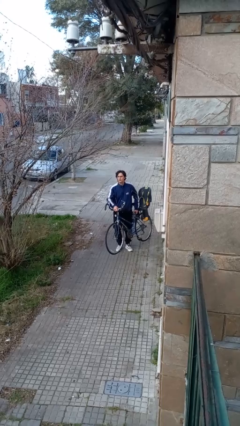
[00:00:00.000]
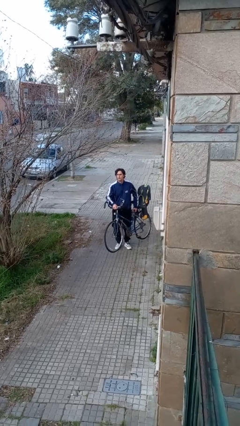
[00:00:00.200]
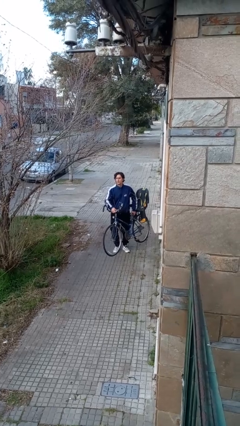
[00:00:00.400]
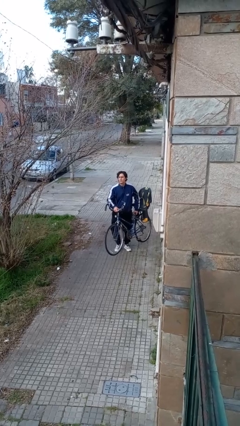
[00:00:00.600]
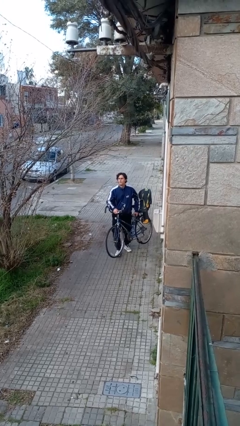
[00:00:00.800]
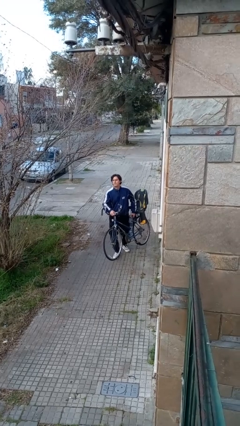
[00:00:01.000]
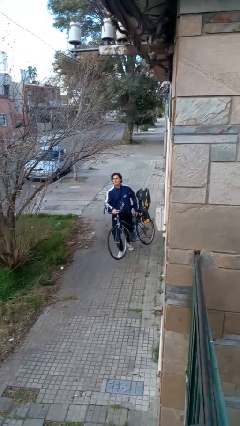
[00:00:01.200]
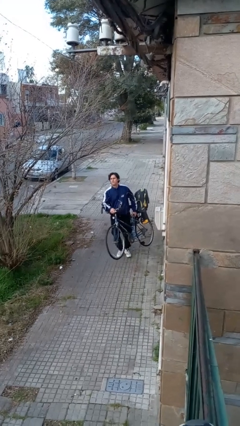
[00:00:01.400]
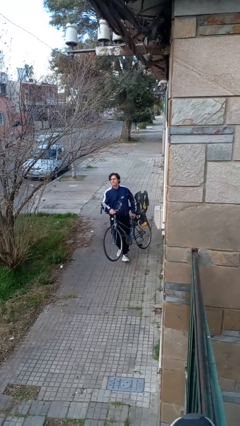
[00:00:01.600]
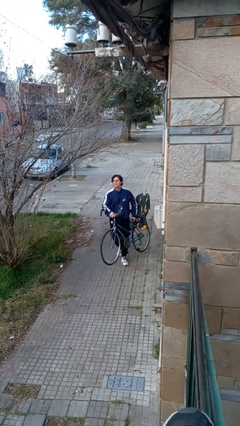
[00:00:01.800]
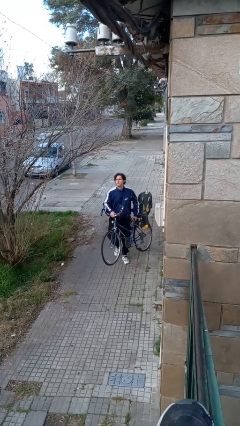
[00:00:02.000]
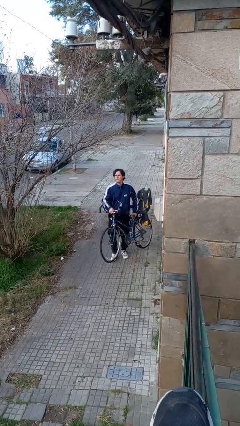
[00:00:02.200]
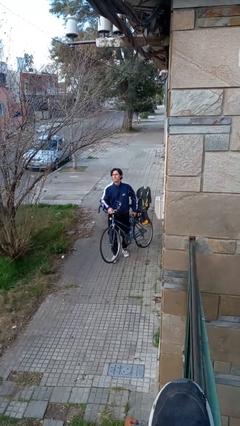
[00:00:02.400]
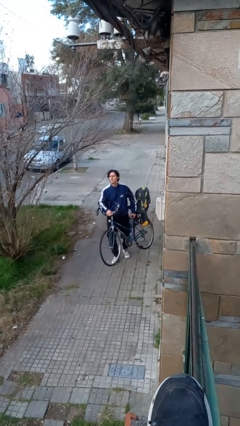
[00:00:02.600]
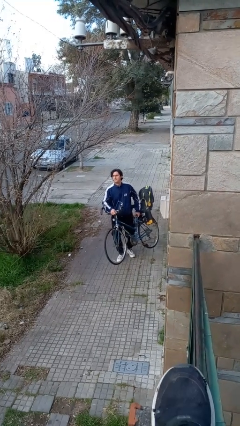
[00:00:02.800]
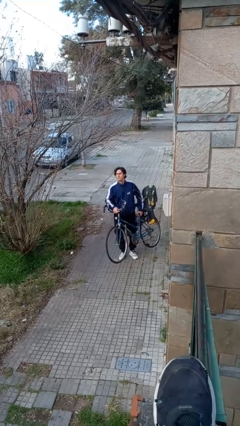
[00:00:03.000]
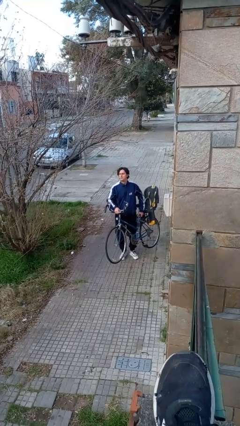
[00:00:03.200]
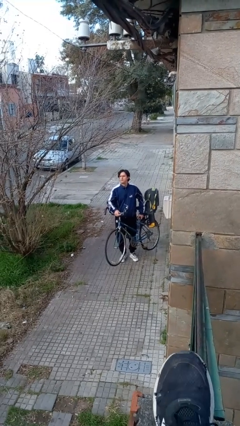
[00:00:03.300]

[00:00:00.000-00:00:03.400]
person carries bicycle

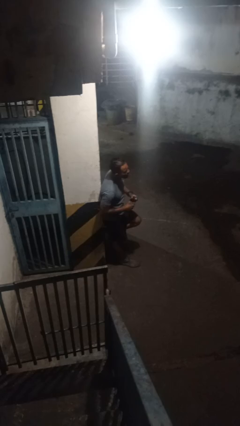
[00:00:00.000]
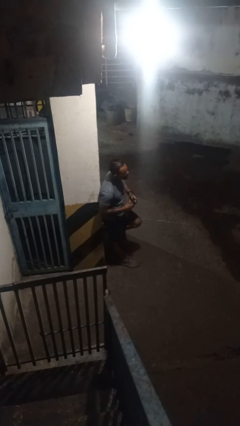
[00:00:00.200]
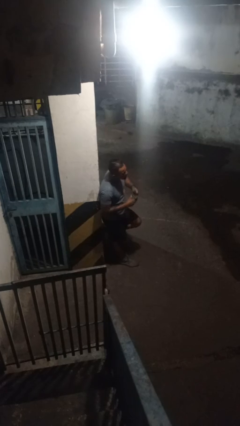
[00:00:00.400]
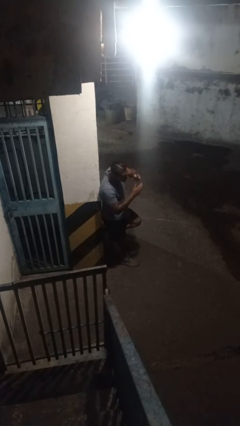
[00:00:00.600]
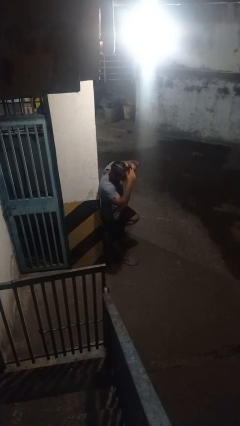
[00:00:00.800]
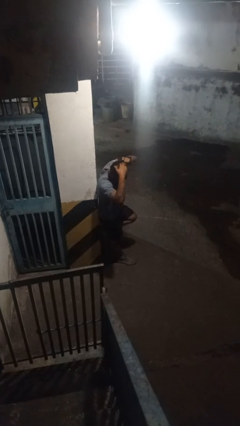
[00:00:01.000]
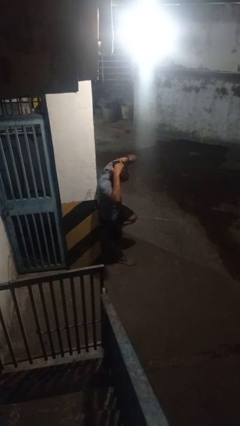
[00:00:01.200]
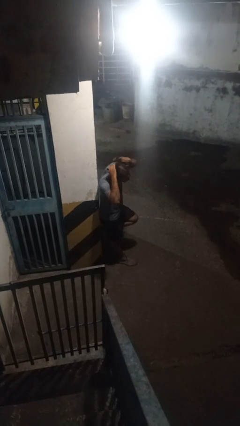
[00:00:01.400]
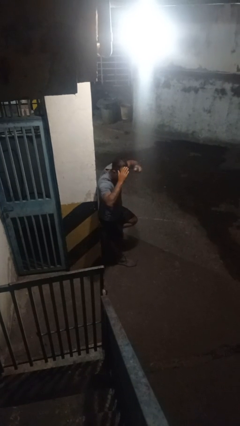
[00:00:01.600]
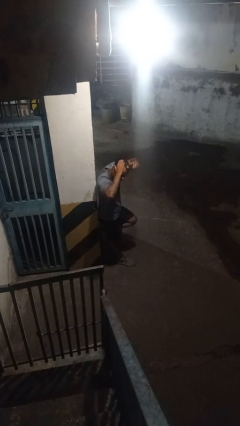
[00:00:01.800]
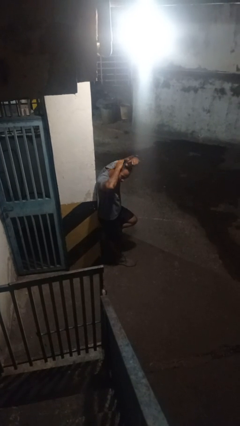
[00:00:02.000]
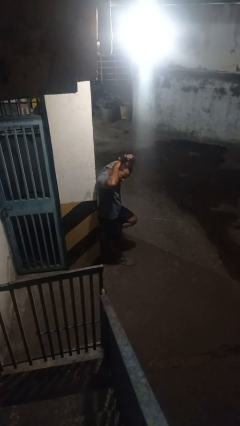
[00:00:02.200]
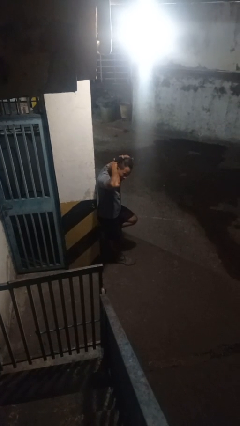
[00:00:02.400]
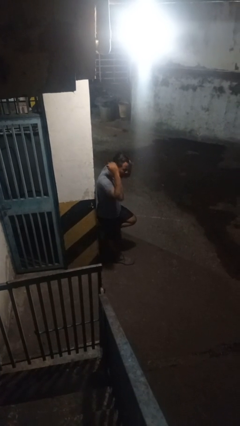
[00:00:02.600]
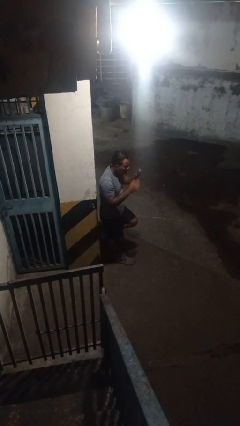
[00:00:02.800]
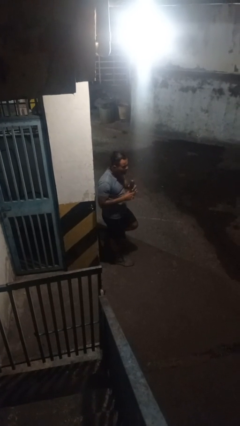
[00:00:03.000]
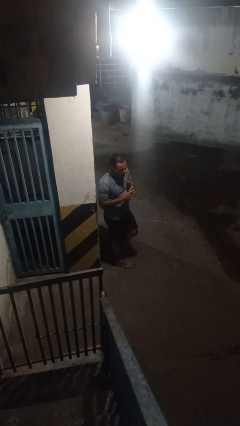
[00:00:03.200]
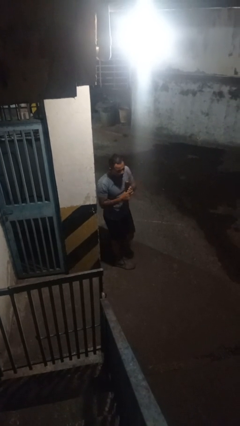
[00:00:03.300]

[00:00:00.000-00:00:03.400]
person brushes hair

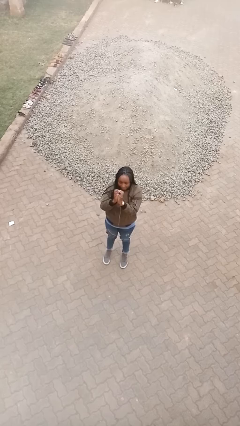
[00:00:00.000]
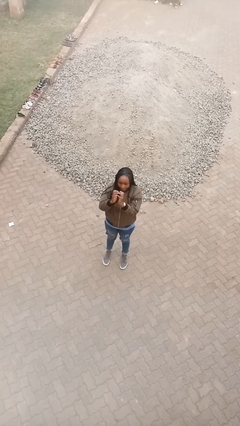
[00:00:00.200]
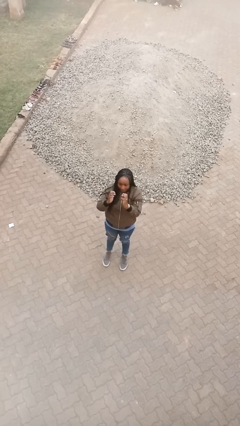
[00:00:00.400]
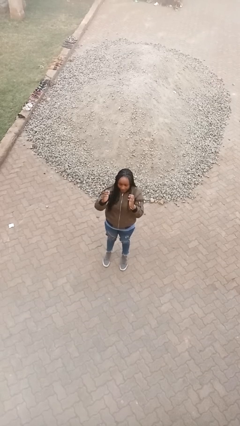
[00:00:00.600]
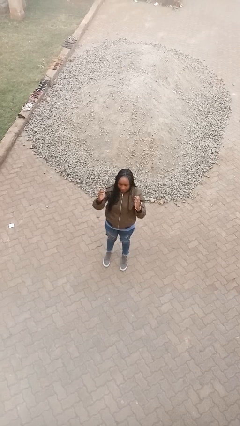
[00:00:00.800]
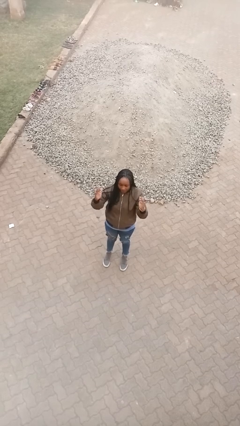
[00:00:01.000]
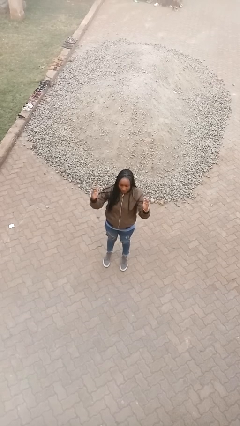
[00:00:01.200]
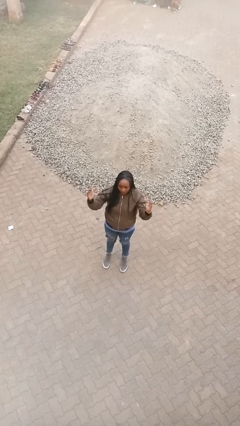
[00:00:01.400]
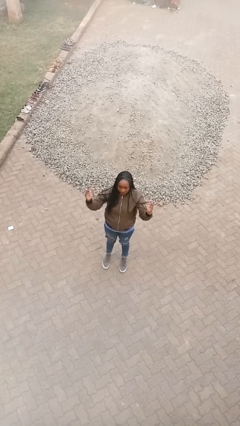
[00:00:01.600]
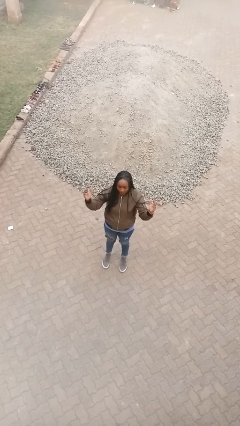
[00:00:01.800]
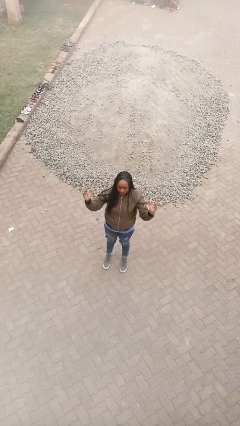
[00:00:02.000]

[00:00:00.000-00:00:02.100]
person gestures zoom out

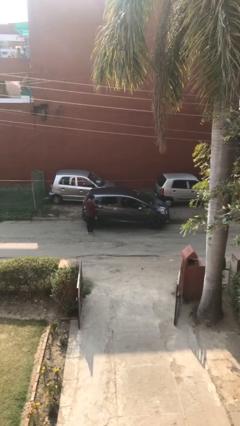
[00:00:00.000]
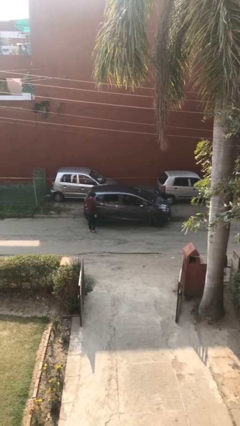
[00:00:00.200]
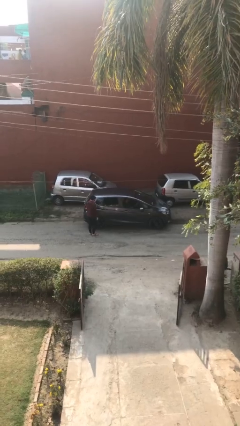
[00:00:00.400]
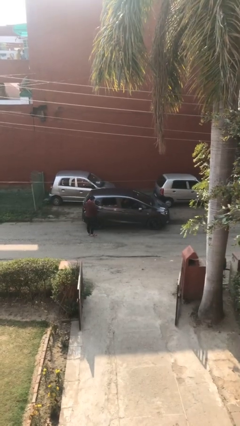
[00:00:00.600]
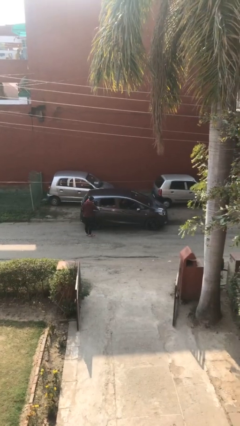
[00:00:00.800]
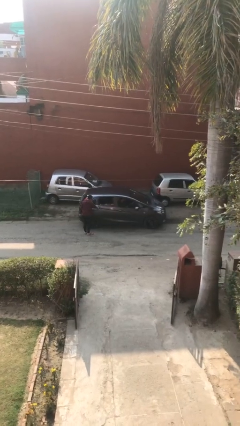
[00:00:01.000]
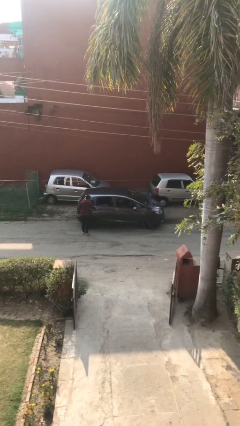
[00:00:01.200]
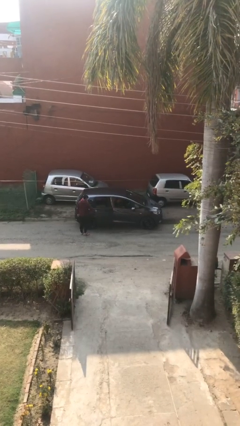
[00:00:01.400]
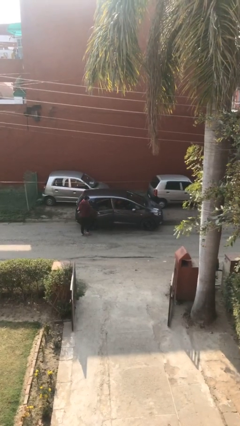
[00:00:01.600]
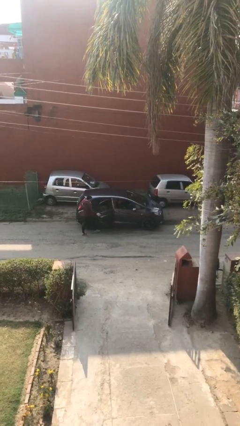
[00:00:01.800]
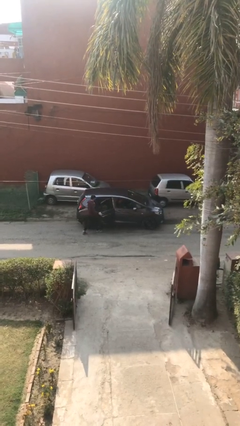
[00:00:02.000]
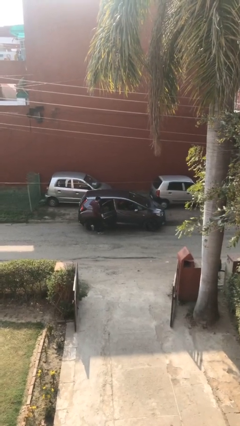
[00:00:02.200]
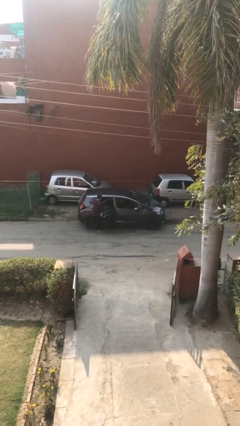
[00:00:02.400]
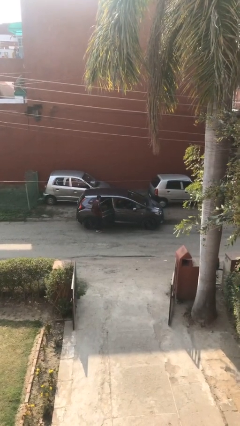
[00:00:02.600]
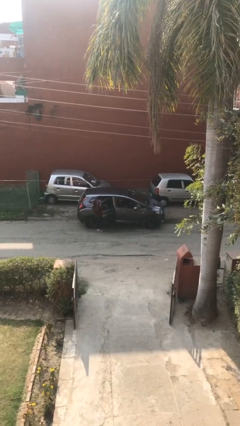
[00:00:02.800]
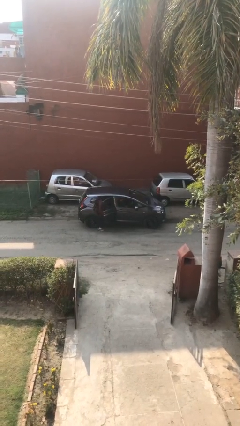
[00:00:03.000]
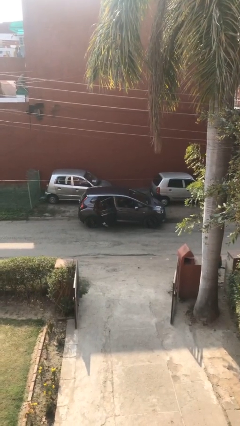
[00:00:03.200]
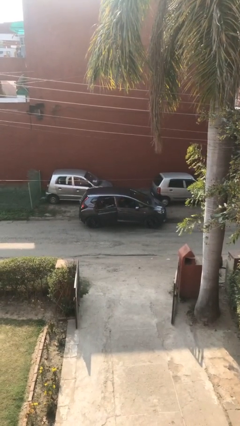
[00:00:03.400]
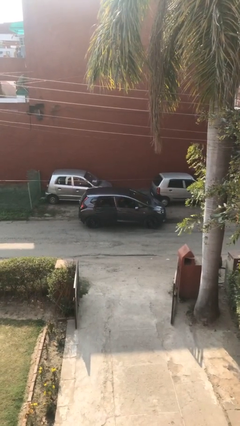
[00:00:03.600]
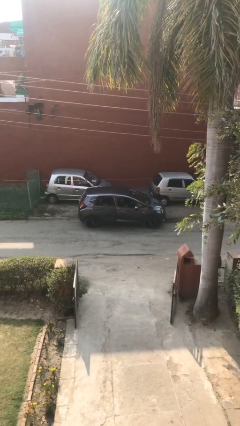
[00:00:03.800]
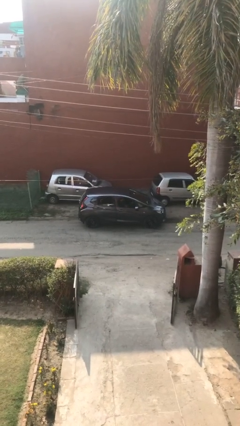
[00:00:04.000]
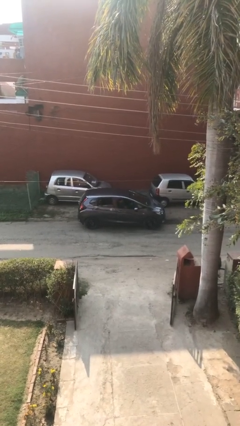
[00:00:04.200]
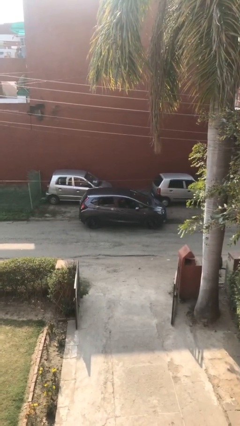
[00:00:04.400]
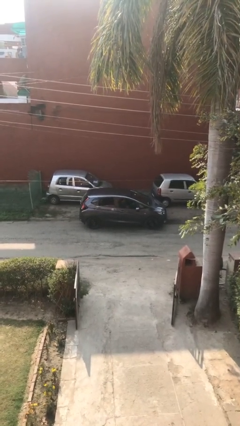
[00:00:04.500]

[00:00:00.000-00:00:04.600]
car picks up person

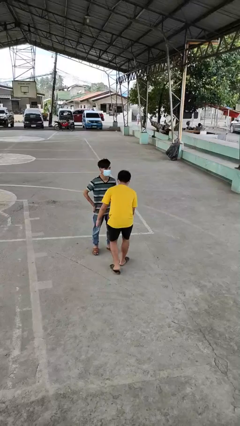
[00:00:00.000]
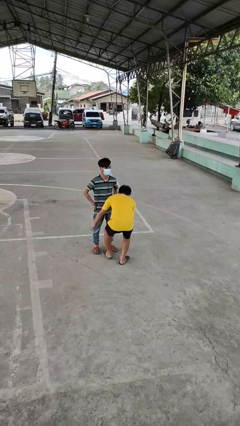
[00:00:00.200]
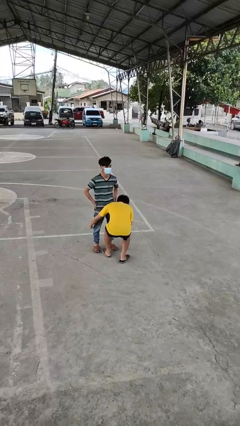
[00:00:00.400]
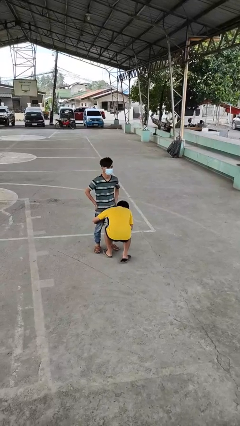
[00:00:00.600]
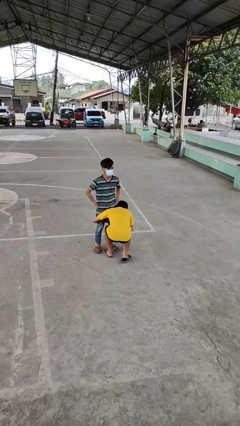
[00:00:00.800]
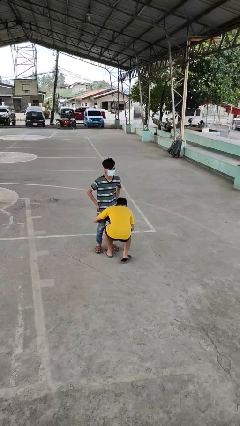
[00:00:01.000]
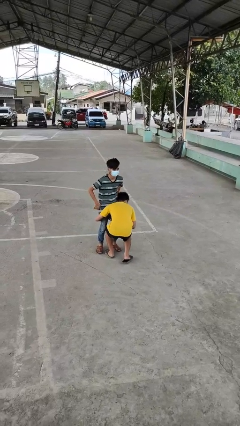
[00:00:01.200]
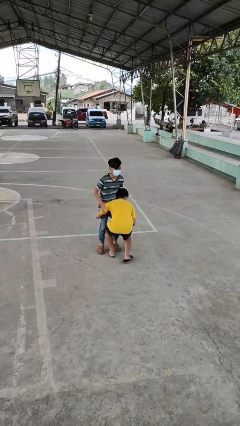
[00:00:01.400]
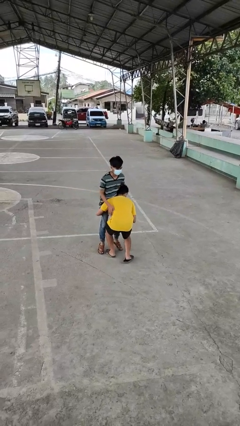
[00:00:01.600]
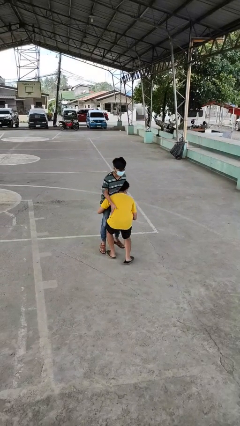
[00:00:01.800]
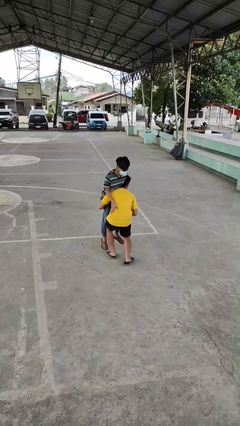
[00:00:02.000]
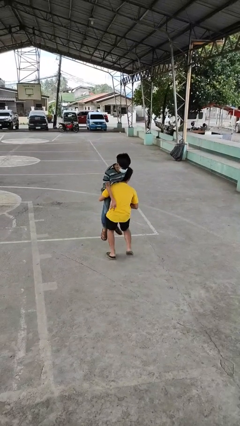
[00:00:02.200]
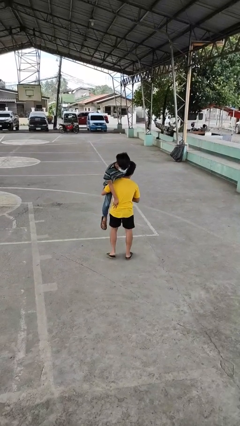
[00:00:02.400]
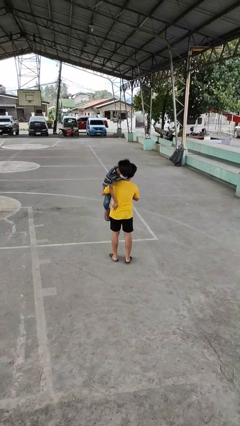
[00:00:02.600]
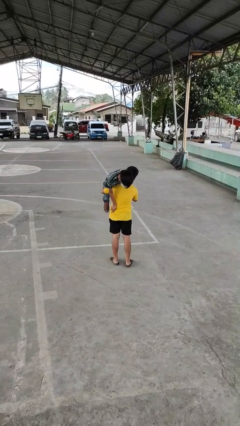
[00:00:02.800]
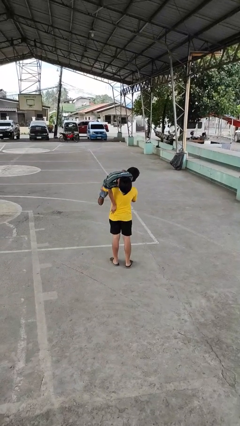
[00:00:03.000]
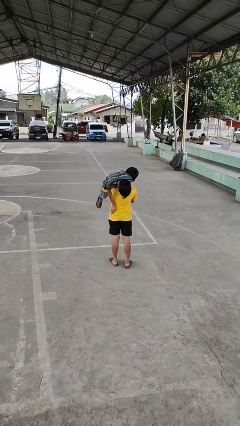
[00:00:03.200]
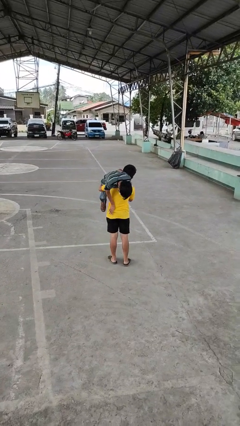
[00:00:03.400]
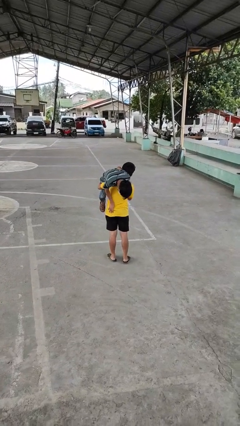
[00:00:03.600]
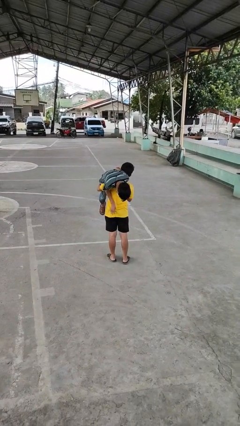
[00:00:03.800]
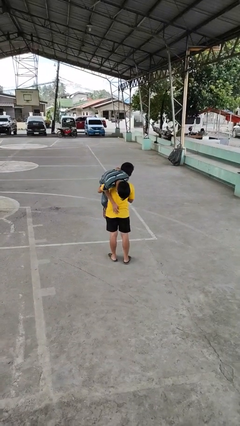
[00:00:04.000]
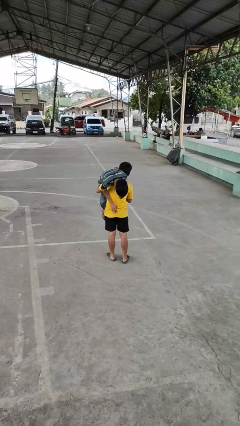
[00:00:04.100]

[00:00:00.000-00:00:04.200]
person carries person over shoulder
